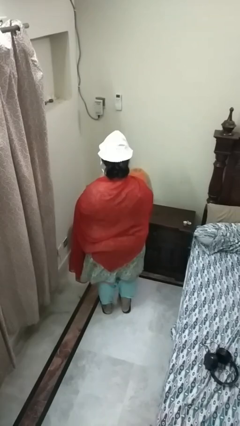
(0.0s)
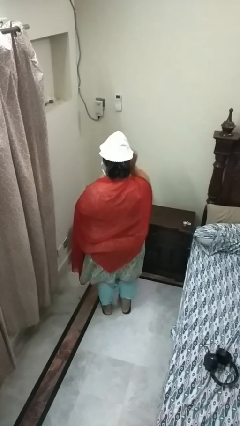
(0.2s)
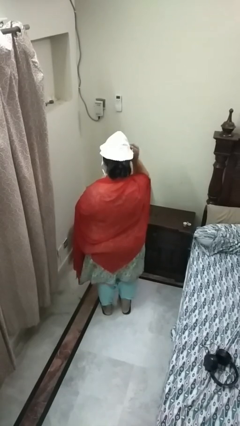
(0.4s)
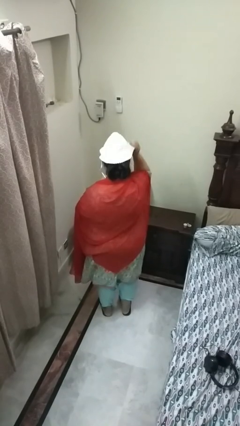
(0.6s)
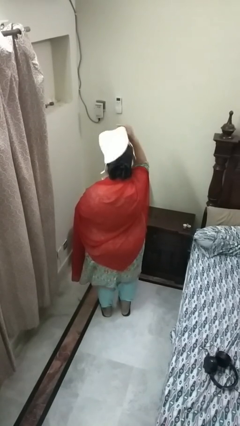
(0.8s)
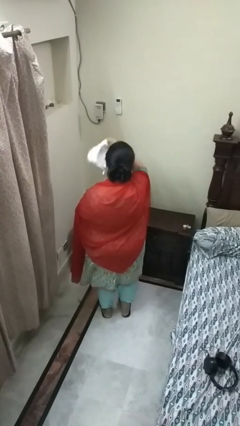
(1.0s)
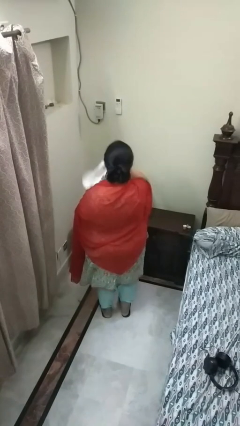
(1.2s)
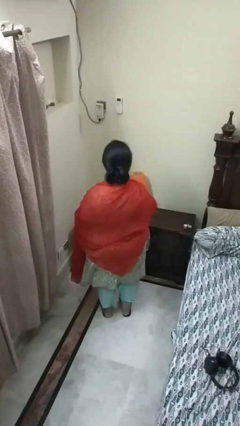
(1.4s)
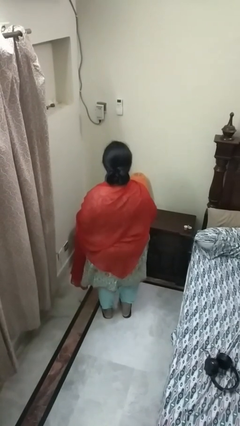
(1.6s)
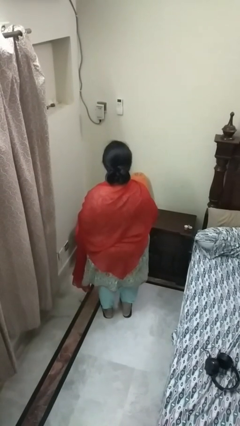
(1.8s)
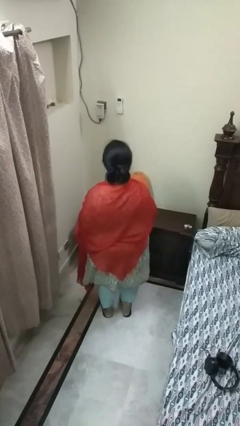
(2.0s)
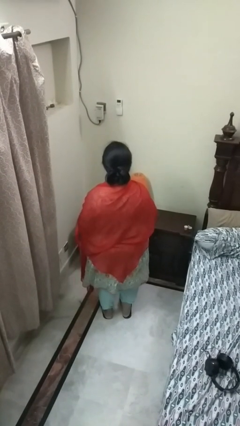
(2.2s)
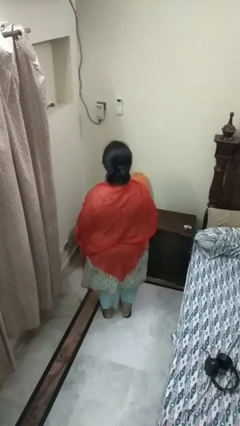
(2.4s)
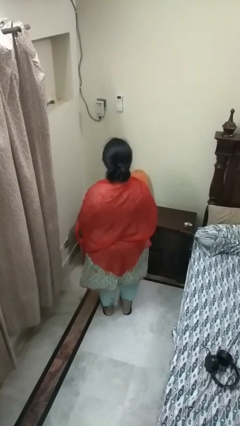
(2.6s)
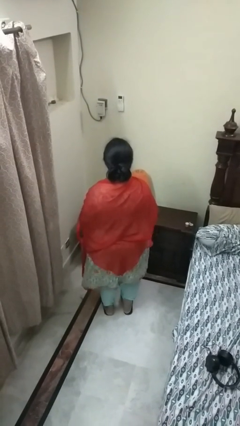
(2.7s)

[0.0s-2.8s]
person takes off hat

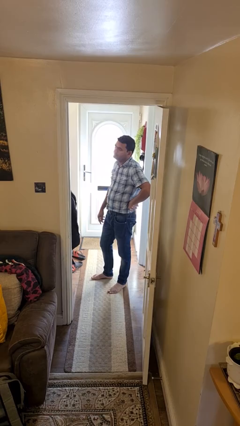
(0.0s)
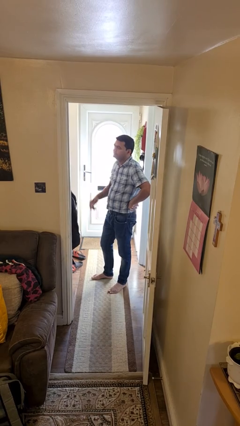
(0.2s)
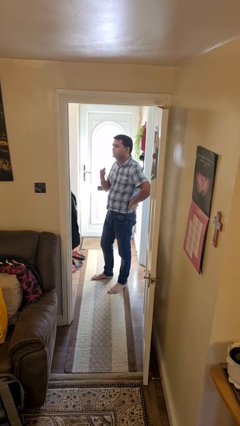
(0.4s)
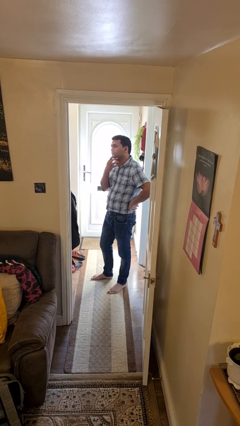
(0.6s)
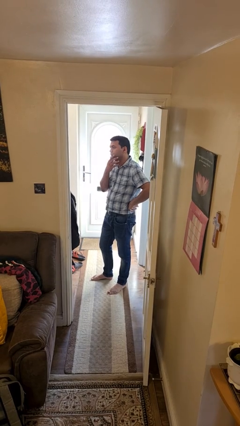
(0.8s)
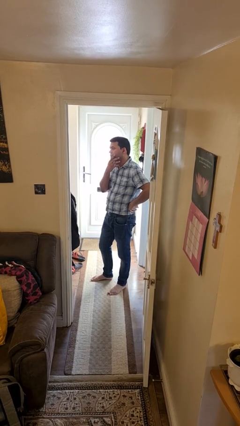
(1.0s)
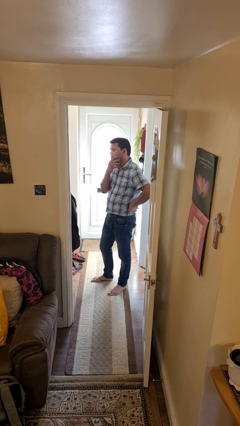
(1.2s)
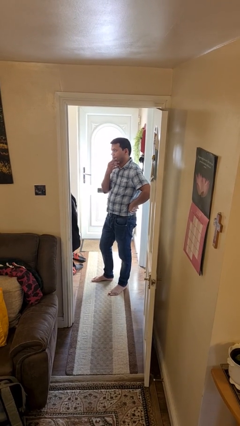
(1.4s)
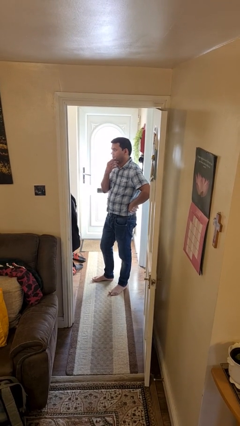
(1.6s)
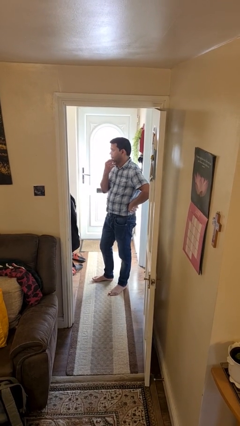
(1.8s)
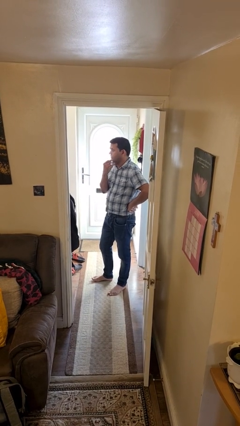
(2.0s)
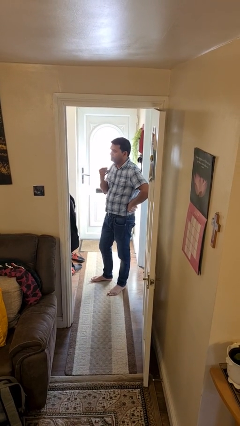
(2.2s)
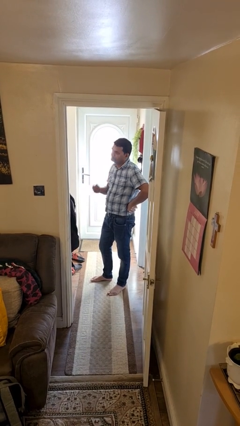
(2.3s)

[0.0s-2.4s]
person strokes chin

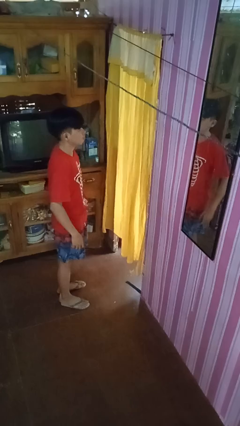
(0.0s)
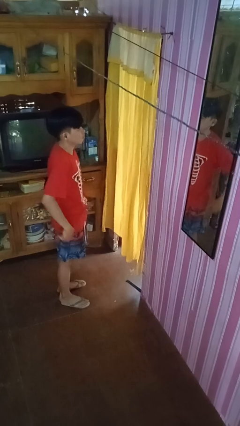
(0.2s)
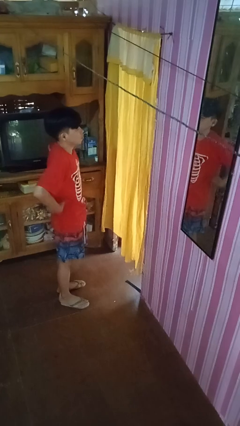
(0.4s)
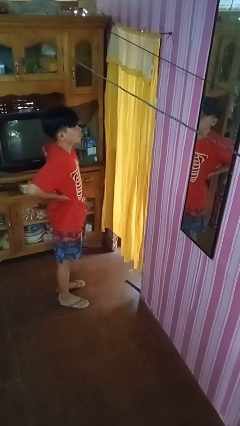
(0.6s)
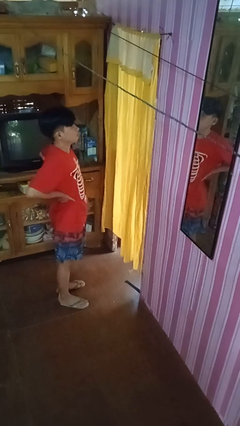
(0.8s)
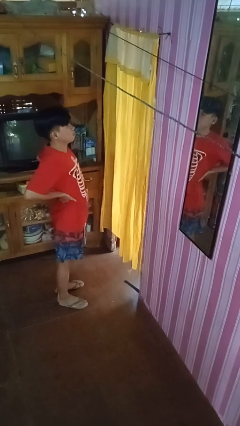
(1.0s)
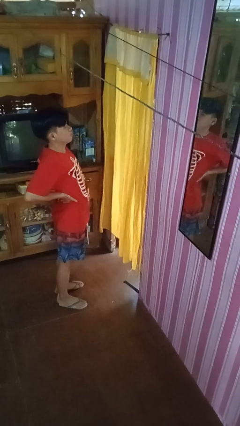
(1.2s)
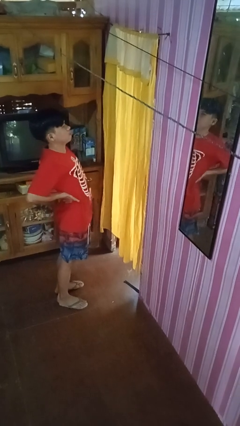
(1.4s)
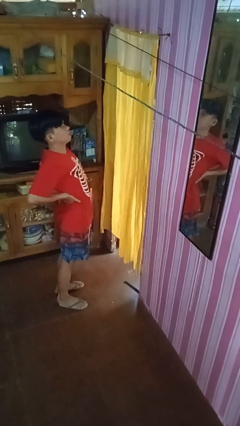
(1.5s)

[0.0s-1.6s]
person stretches back

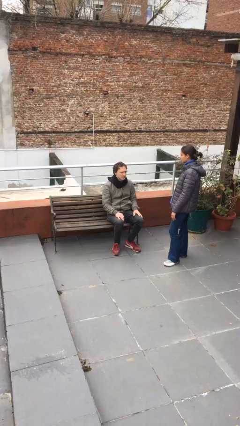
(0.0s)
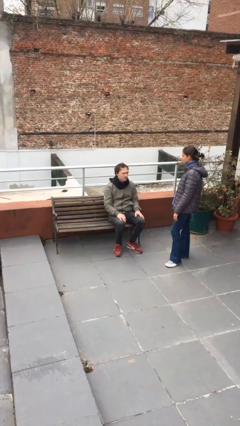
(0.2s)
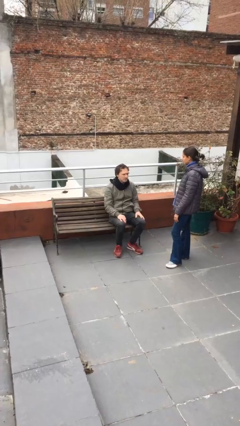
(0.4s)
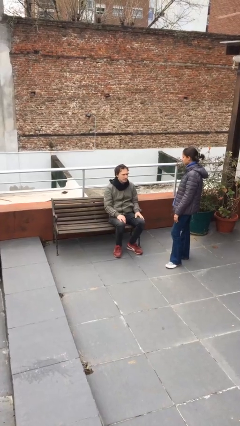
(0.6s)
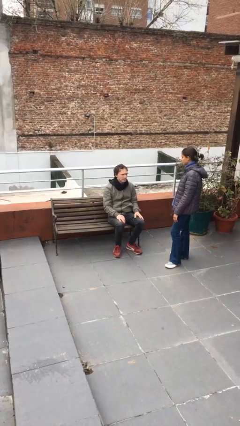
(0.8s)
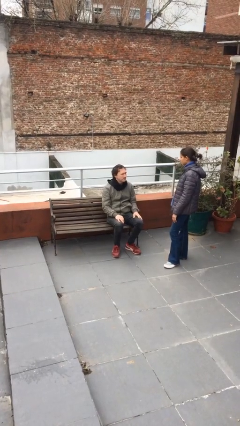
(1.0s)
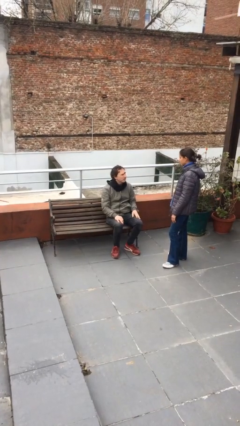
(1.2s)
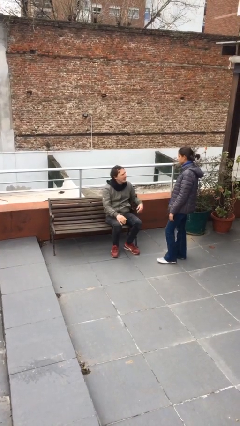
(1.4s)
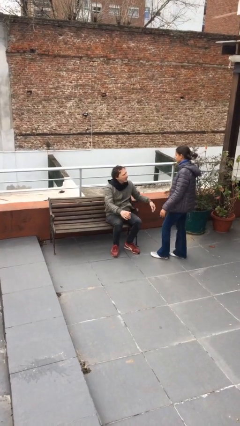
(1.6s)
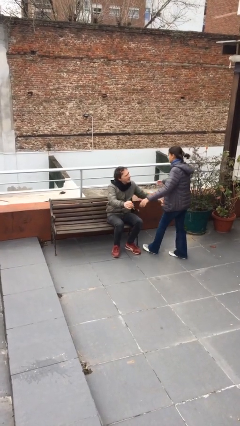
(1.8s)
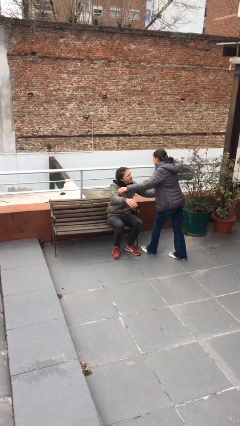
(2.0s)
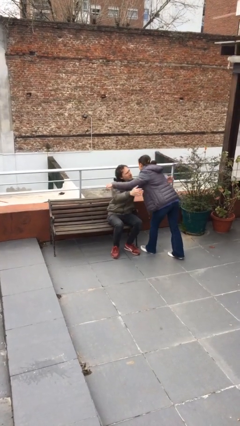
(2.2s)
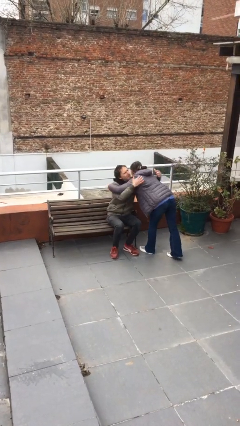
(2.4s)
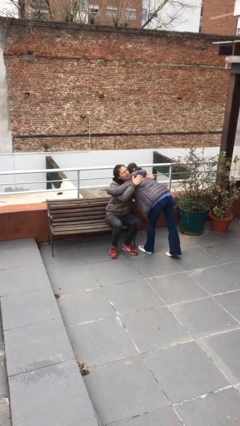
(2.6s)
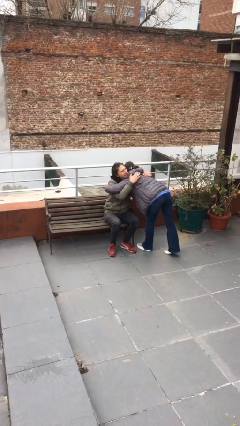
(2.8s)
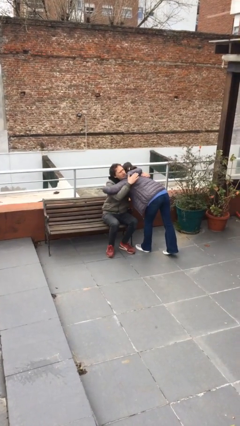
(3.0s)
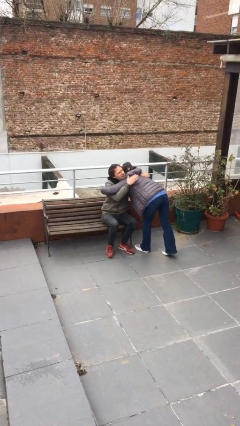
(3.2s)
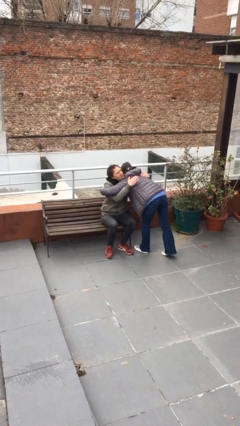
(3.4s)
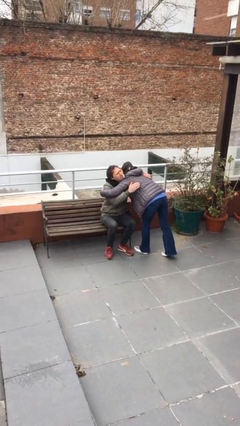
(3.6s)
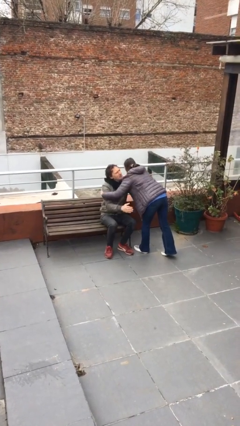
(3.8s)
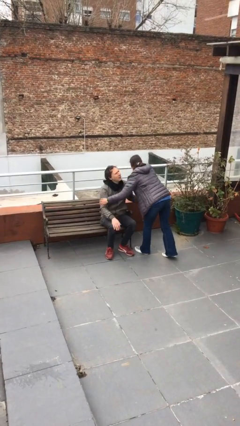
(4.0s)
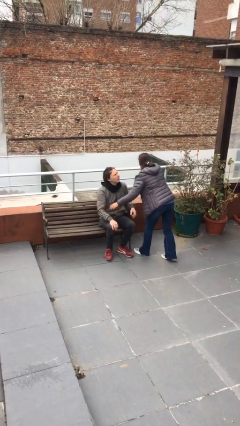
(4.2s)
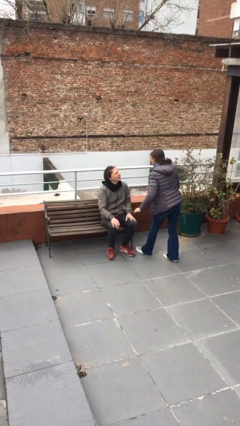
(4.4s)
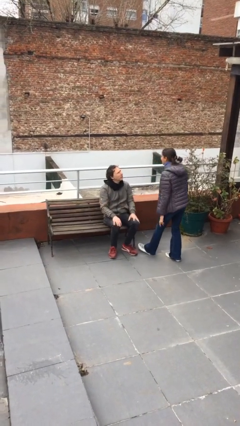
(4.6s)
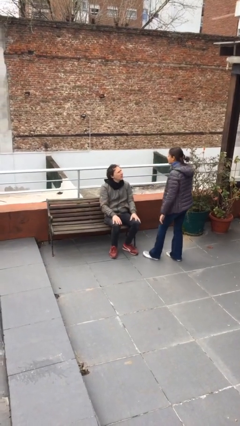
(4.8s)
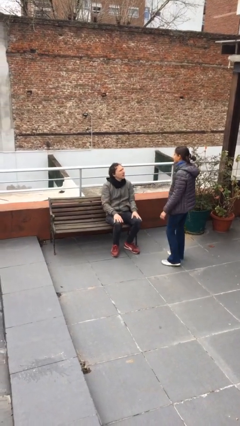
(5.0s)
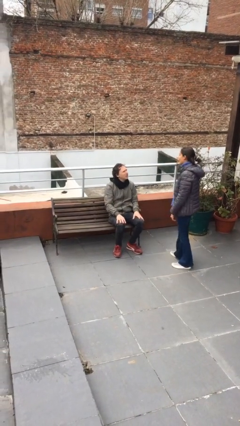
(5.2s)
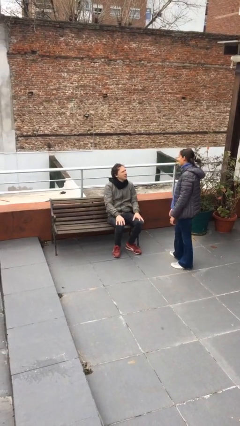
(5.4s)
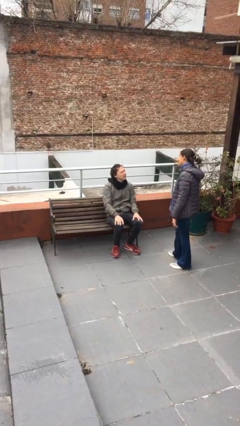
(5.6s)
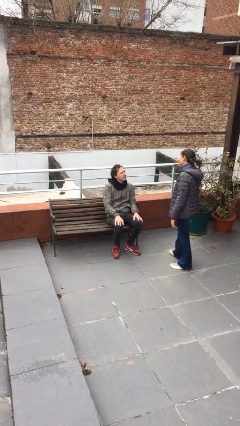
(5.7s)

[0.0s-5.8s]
person embraces person

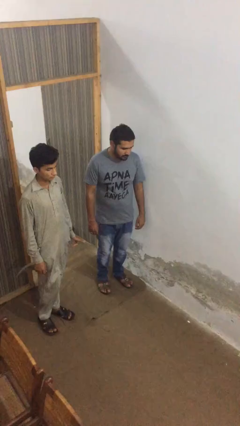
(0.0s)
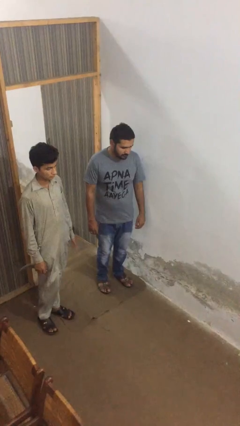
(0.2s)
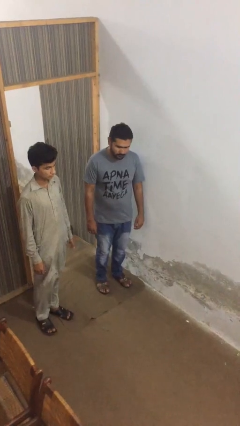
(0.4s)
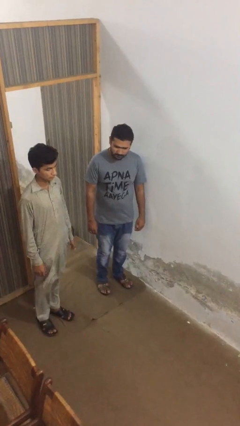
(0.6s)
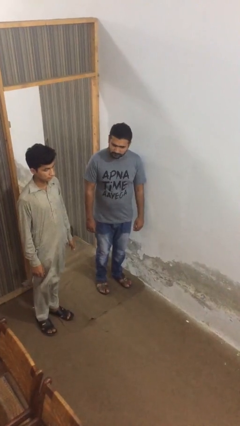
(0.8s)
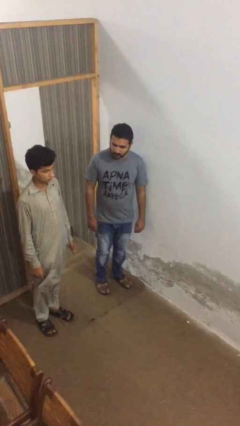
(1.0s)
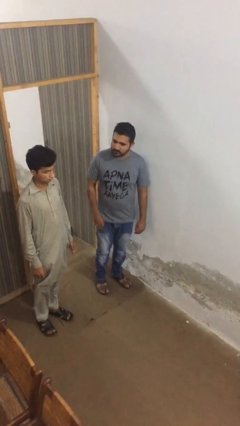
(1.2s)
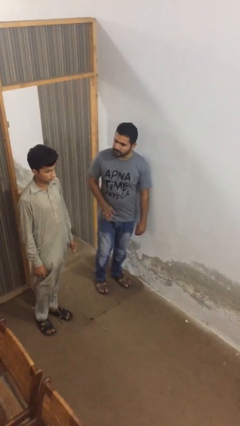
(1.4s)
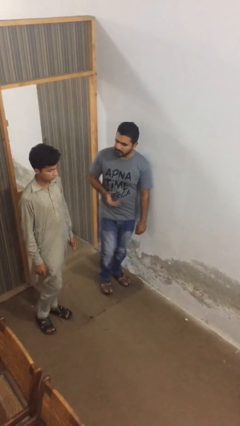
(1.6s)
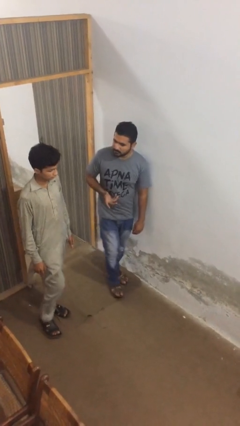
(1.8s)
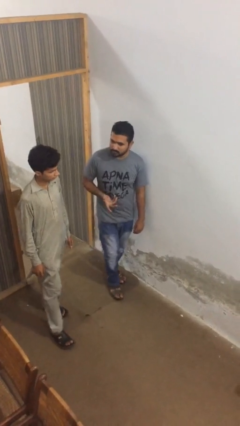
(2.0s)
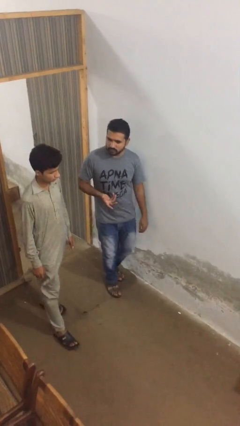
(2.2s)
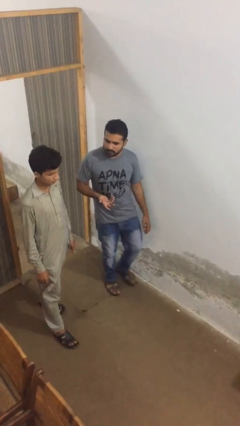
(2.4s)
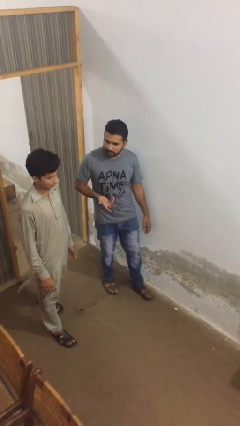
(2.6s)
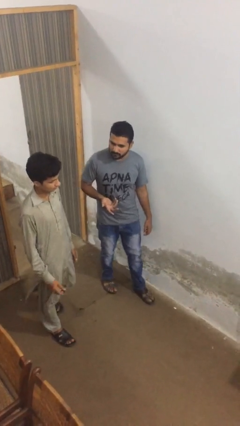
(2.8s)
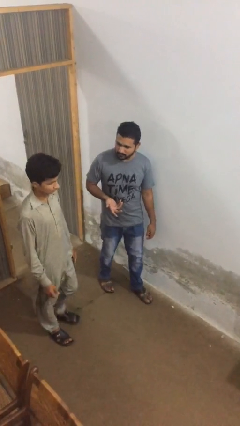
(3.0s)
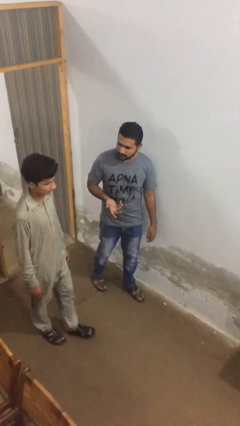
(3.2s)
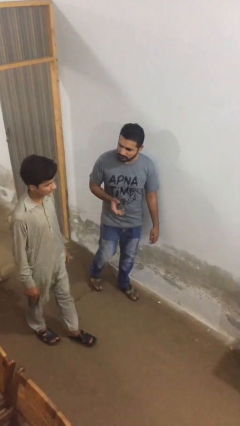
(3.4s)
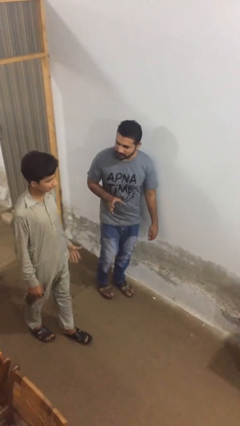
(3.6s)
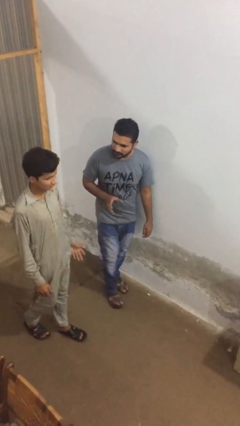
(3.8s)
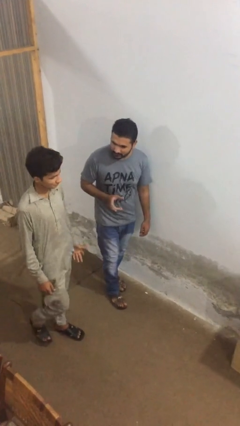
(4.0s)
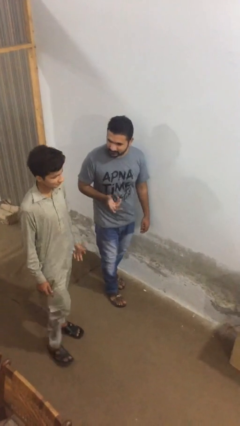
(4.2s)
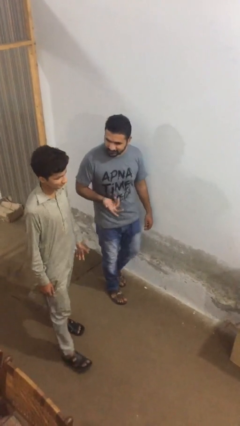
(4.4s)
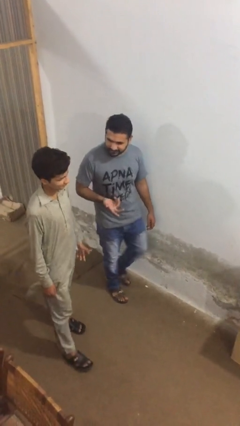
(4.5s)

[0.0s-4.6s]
person talks to person
